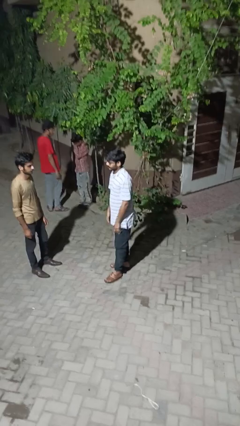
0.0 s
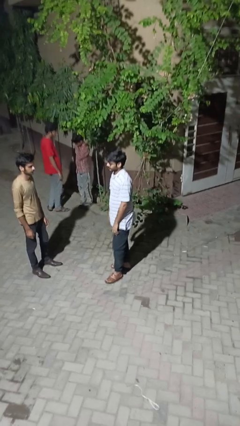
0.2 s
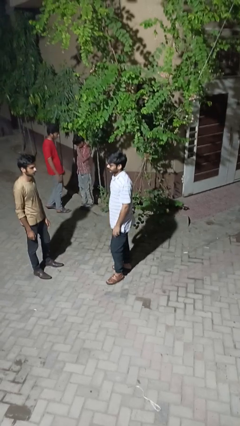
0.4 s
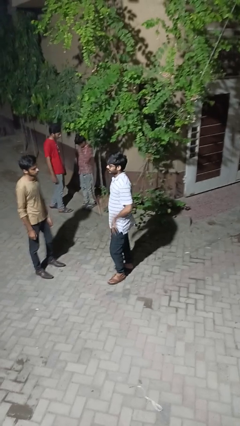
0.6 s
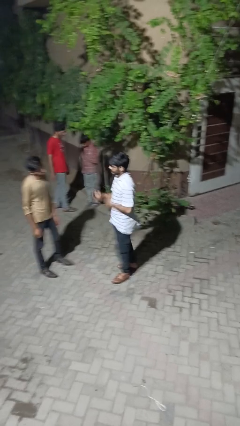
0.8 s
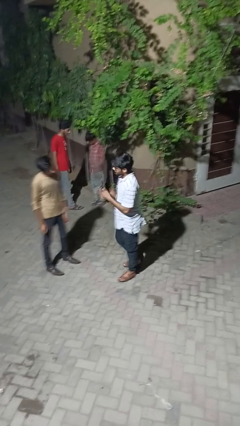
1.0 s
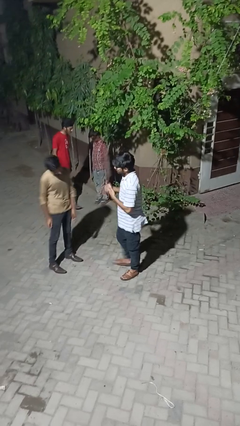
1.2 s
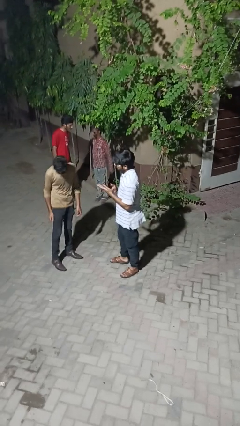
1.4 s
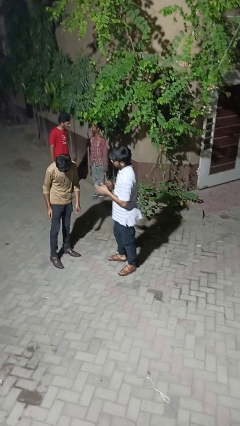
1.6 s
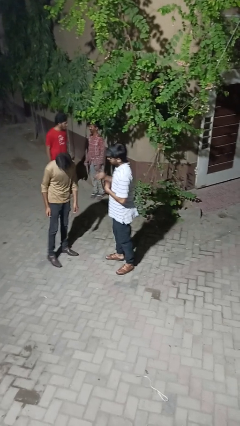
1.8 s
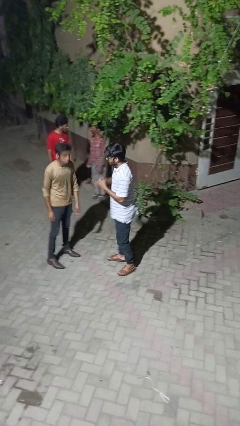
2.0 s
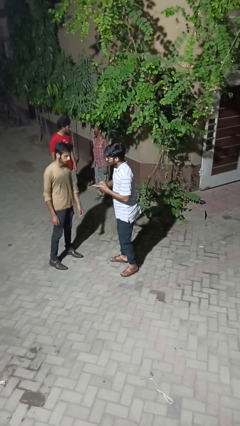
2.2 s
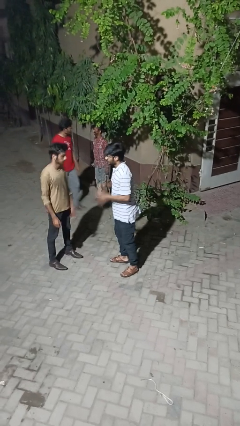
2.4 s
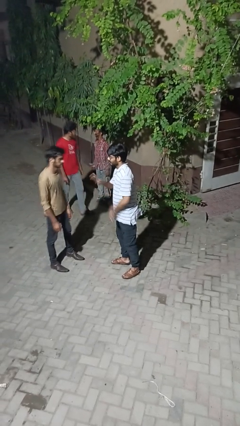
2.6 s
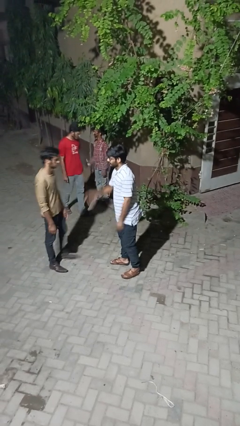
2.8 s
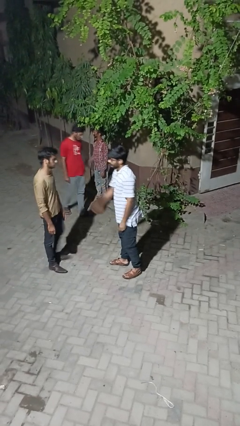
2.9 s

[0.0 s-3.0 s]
person talks to person

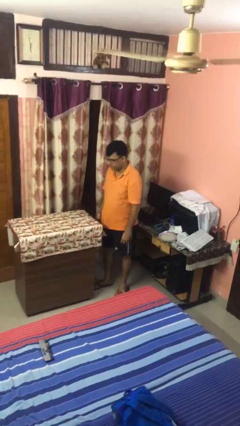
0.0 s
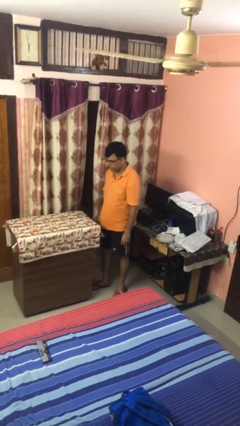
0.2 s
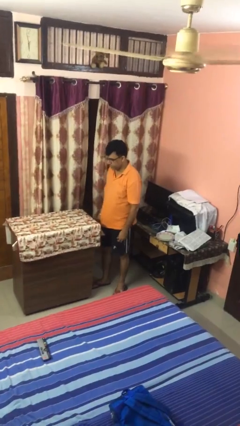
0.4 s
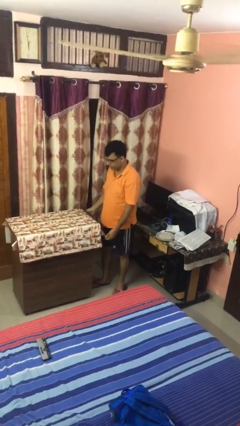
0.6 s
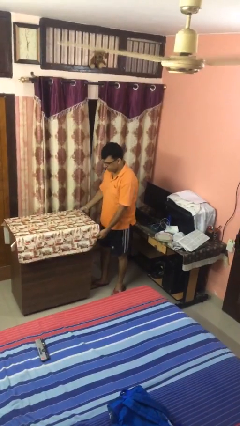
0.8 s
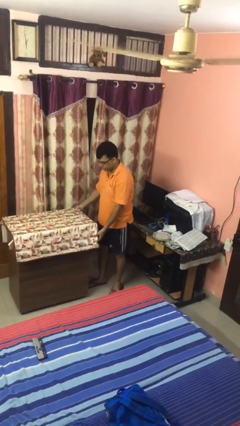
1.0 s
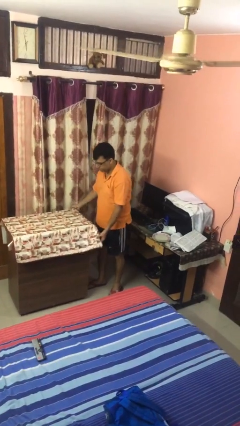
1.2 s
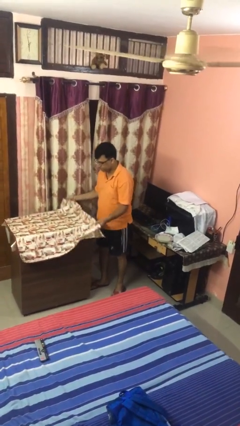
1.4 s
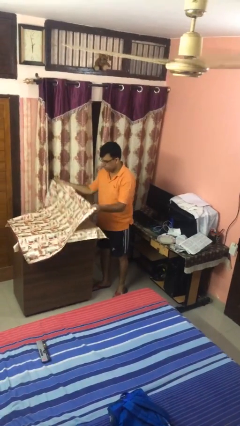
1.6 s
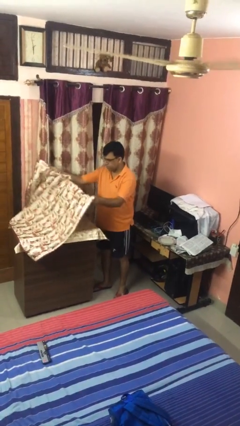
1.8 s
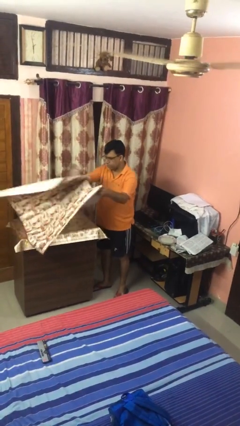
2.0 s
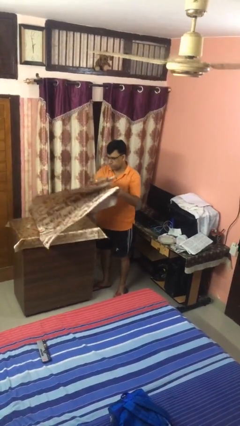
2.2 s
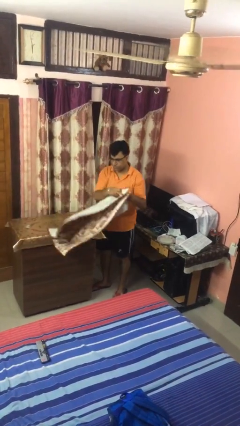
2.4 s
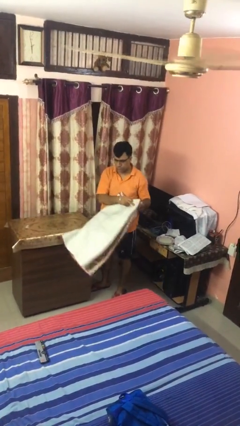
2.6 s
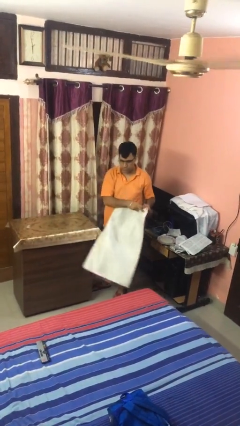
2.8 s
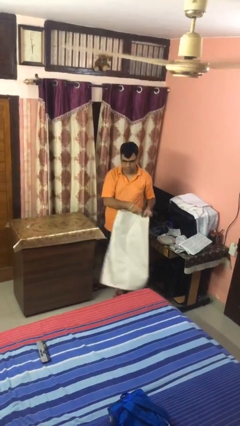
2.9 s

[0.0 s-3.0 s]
person folds tablecloth

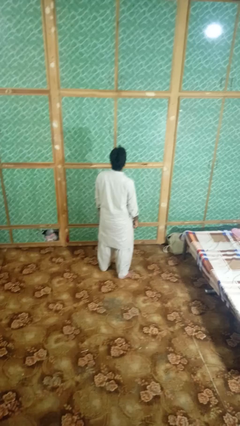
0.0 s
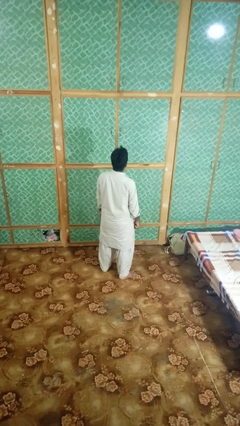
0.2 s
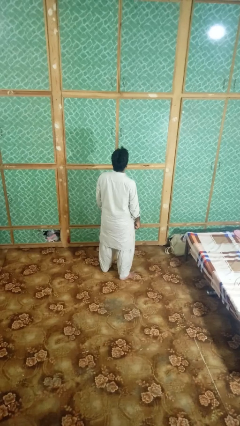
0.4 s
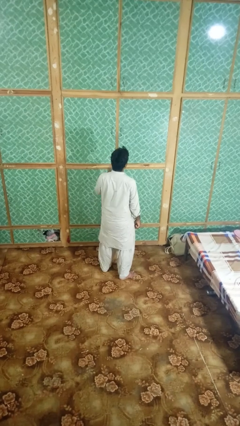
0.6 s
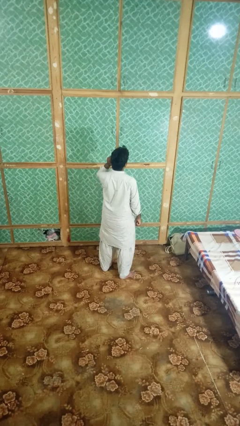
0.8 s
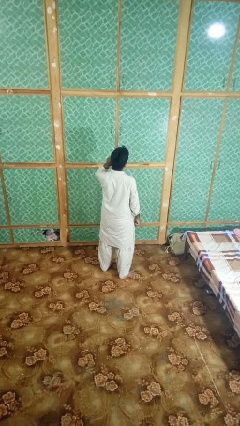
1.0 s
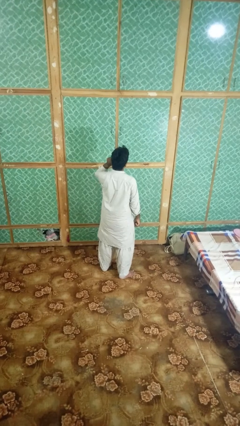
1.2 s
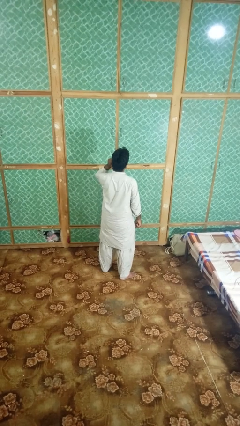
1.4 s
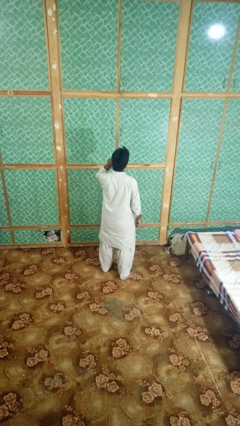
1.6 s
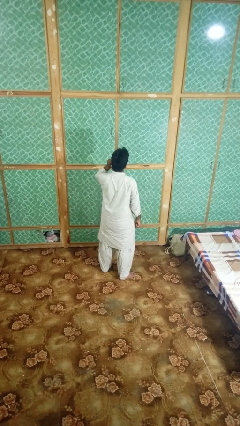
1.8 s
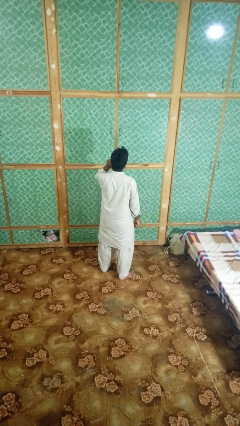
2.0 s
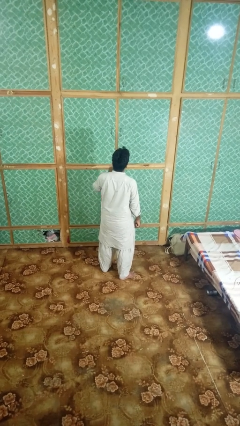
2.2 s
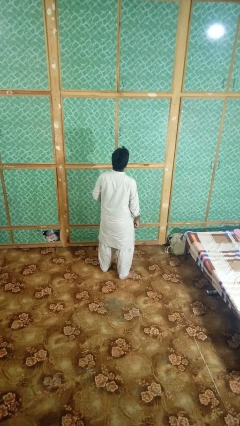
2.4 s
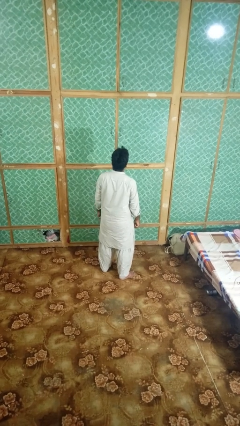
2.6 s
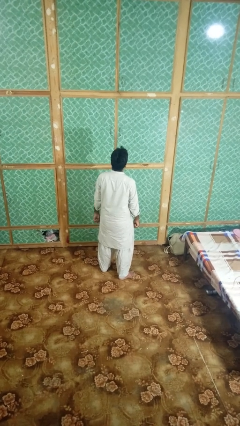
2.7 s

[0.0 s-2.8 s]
person touches earlobe

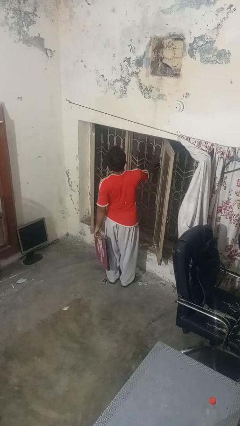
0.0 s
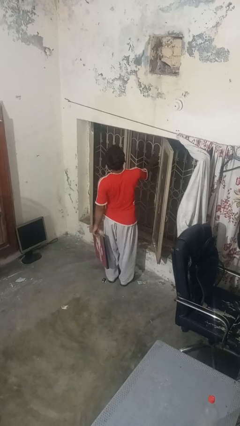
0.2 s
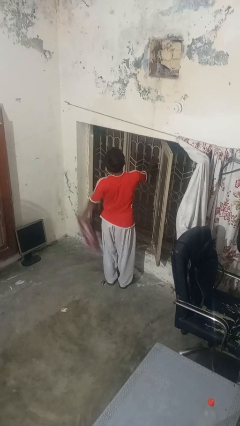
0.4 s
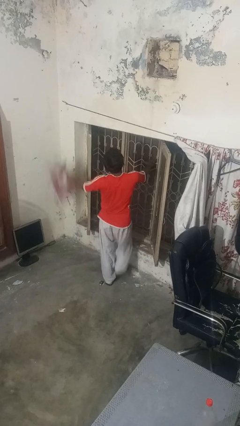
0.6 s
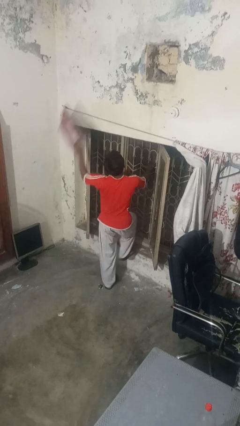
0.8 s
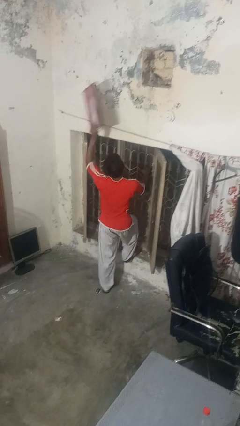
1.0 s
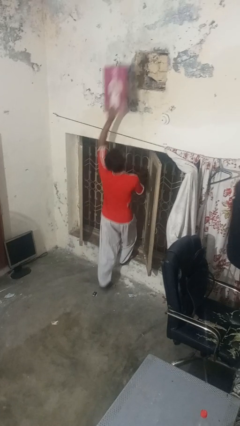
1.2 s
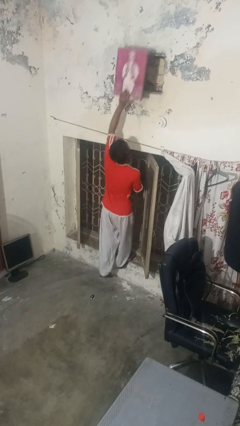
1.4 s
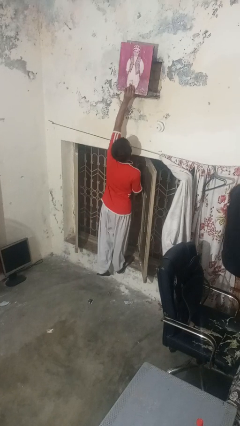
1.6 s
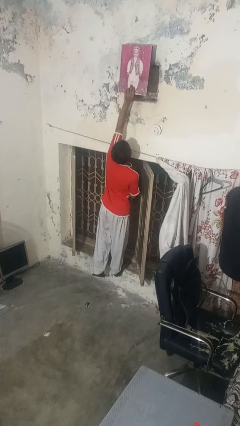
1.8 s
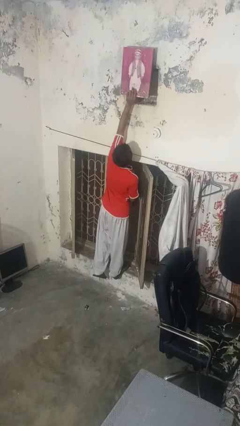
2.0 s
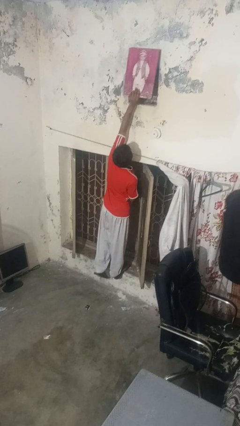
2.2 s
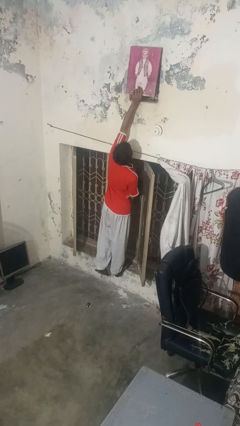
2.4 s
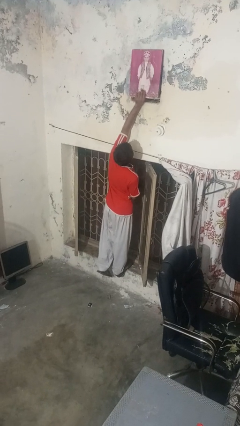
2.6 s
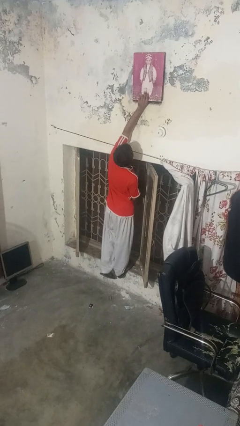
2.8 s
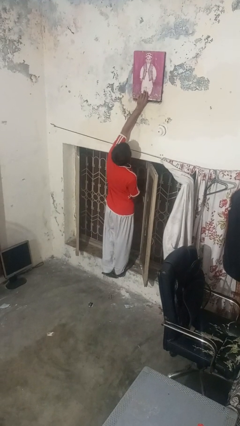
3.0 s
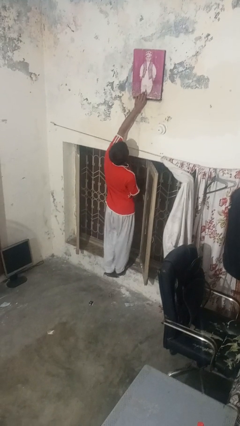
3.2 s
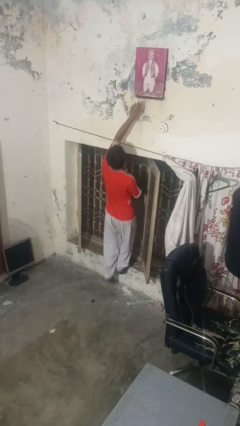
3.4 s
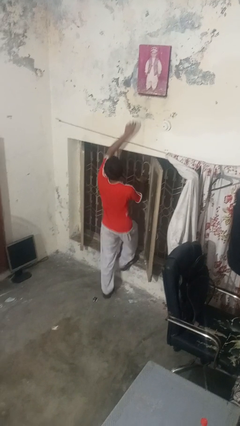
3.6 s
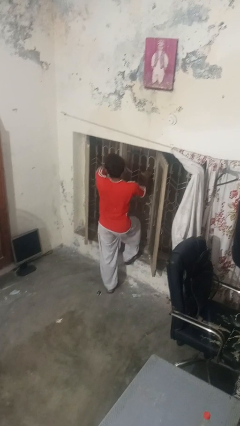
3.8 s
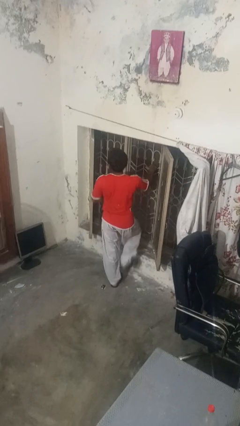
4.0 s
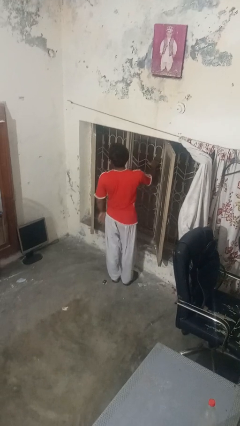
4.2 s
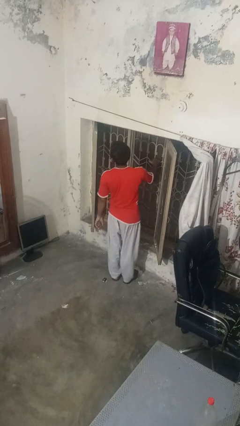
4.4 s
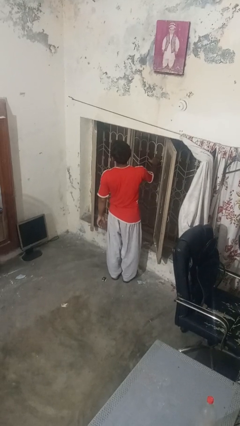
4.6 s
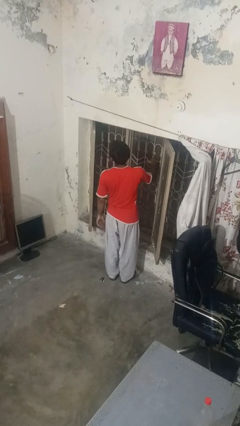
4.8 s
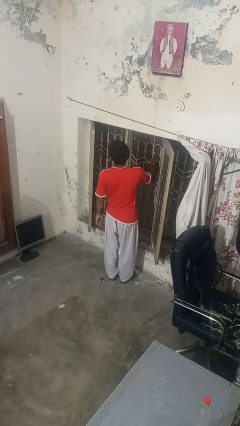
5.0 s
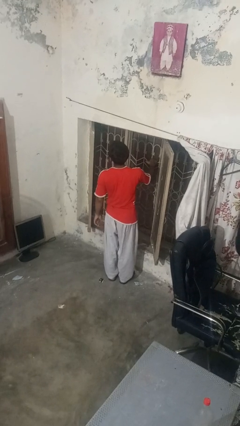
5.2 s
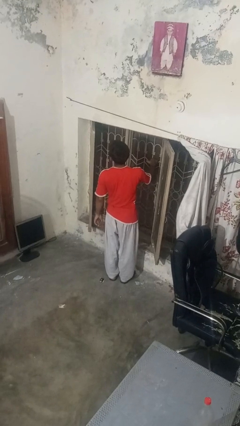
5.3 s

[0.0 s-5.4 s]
person puts up picture frame

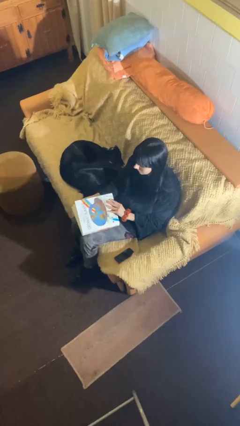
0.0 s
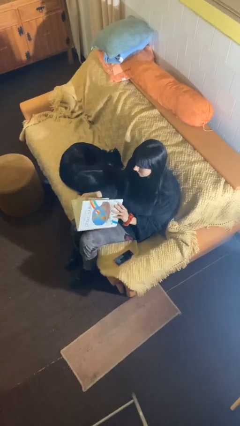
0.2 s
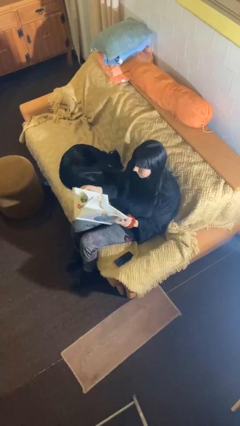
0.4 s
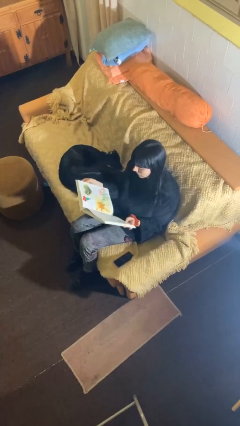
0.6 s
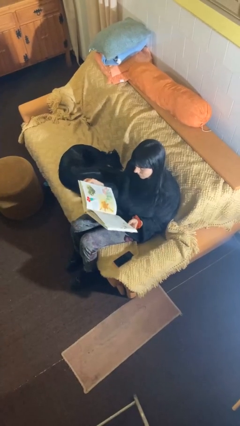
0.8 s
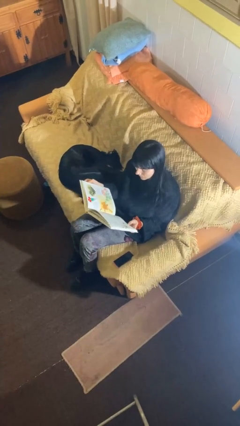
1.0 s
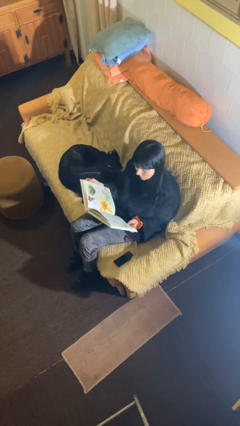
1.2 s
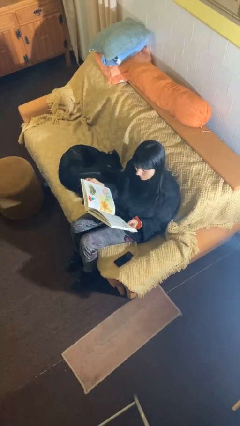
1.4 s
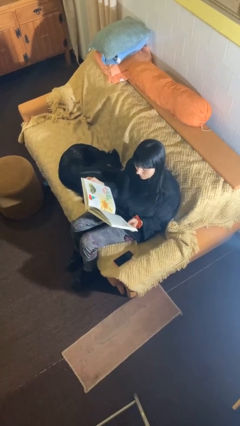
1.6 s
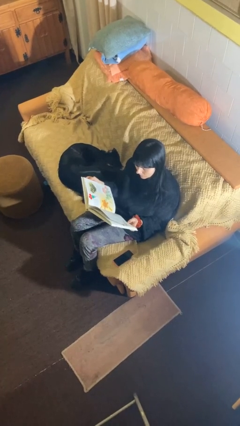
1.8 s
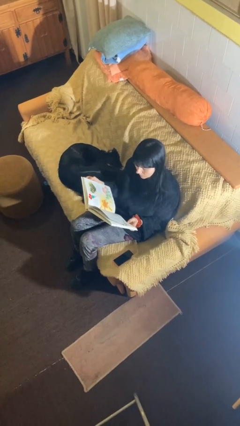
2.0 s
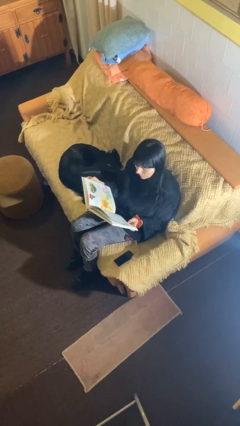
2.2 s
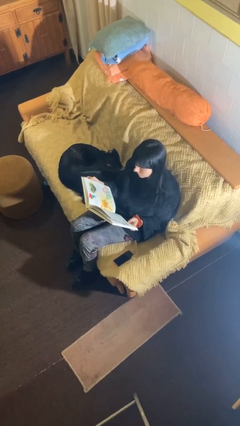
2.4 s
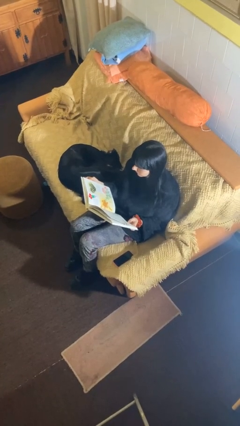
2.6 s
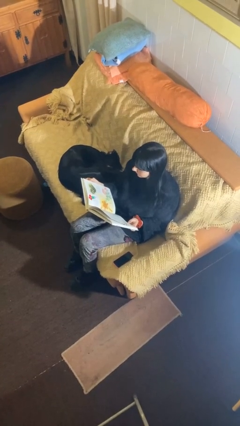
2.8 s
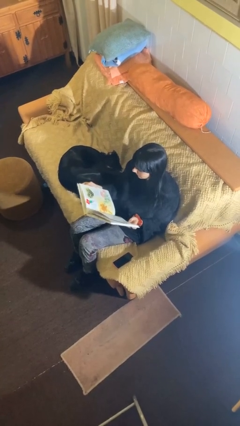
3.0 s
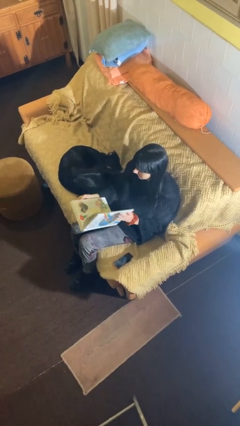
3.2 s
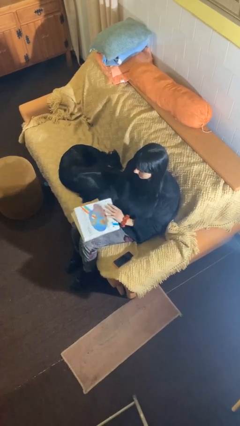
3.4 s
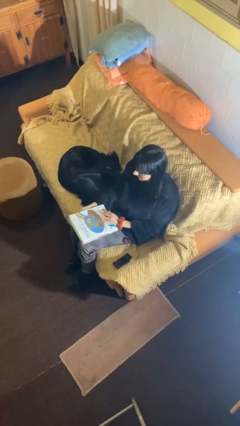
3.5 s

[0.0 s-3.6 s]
person reads document
